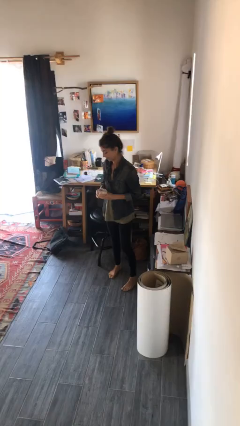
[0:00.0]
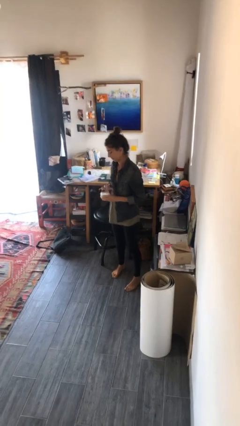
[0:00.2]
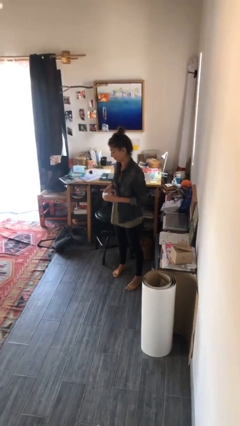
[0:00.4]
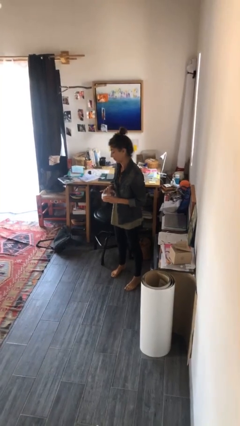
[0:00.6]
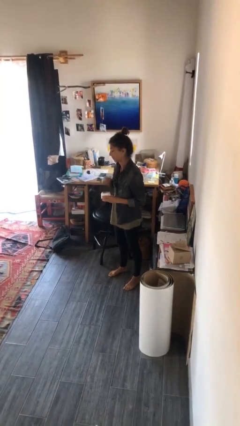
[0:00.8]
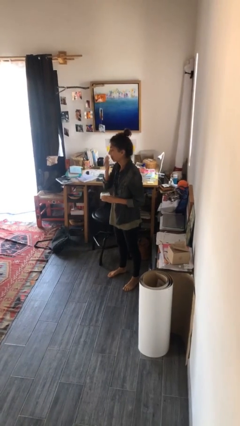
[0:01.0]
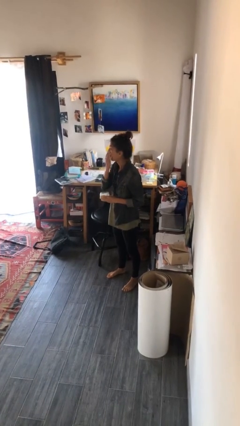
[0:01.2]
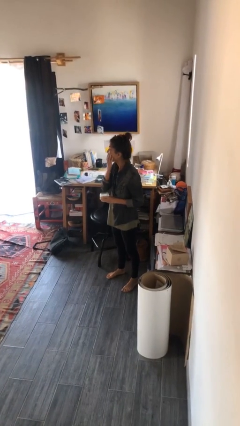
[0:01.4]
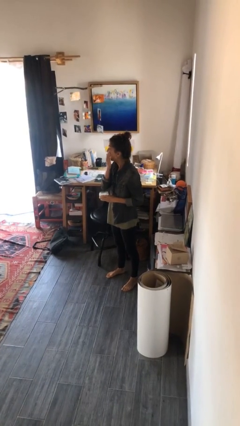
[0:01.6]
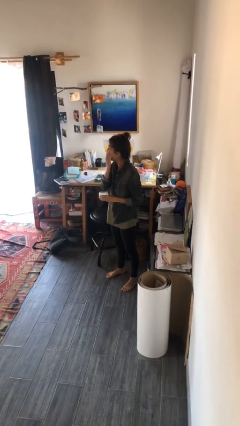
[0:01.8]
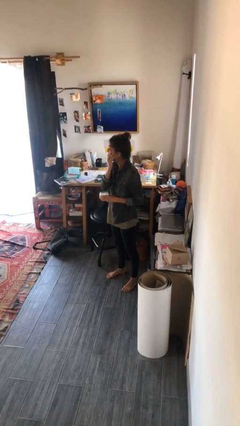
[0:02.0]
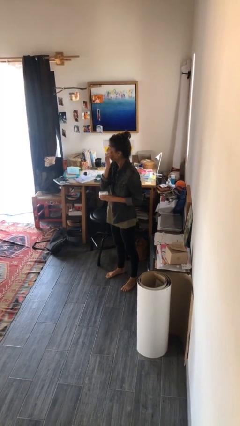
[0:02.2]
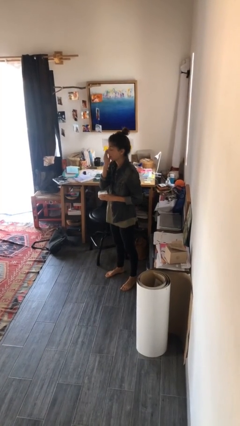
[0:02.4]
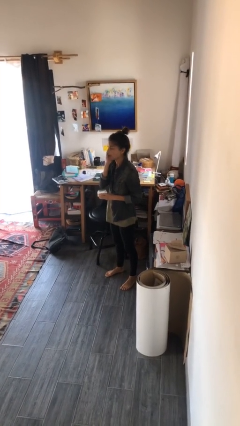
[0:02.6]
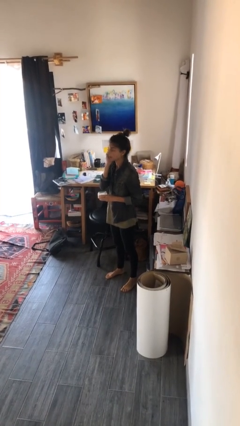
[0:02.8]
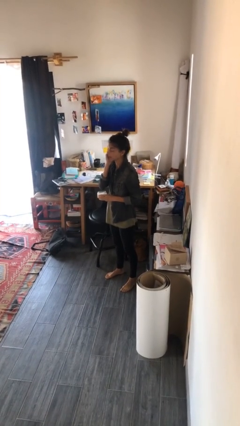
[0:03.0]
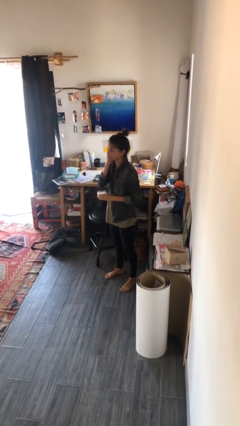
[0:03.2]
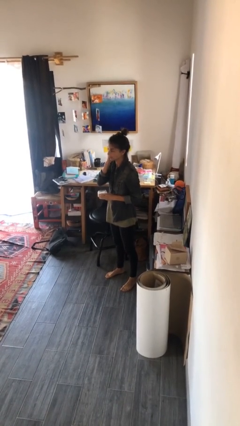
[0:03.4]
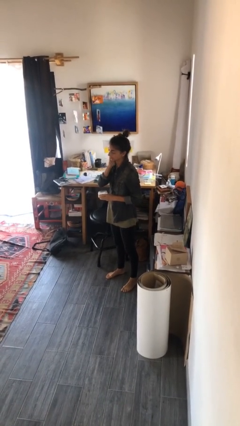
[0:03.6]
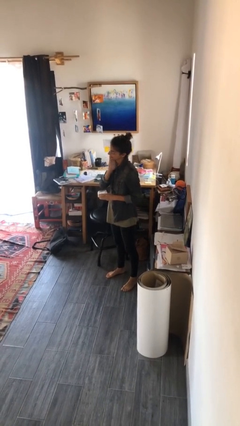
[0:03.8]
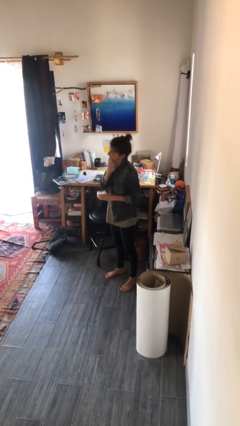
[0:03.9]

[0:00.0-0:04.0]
person applies facial moisturizer

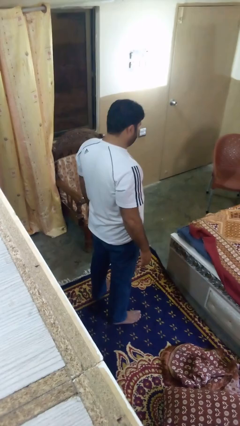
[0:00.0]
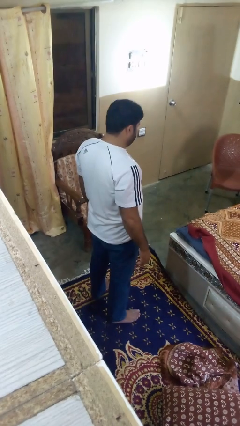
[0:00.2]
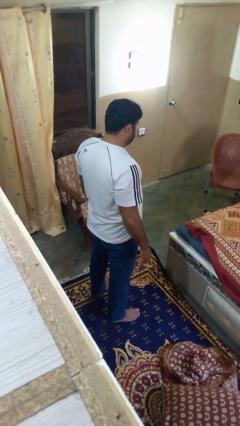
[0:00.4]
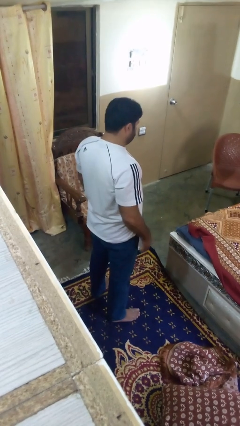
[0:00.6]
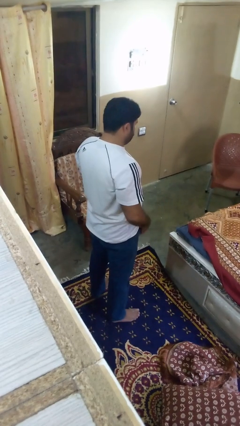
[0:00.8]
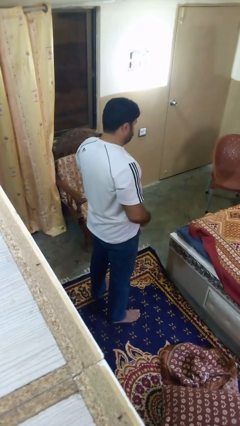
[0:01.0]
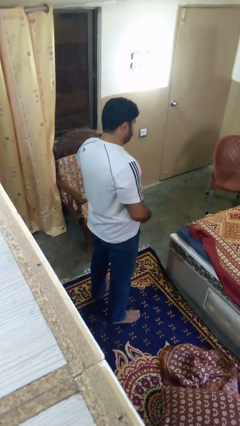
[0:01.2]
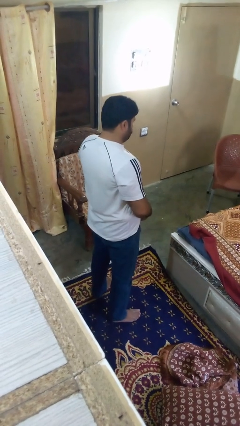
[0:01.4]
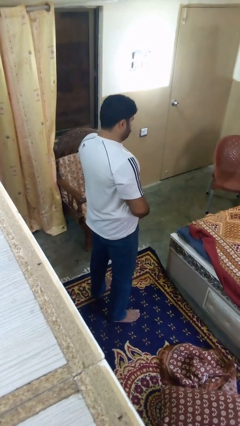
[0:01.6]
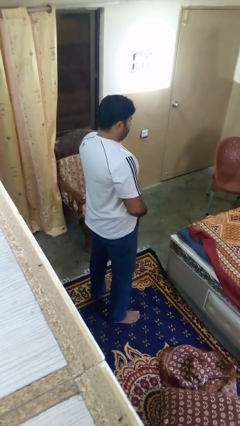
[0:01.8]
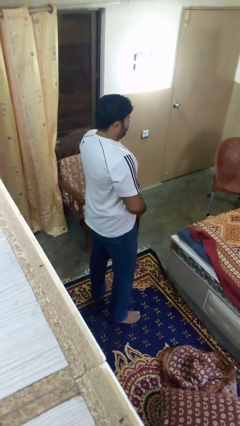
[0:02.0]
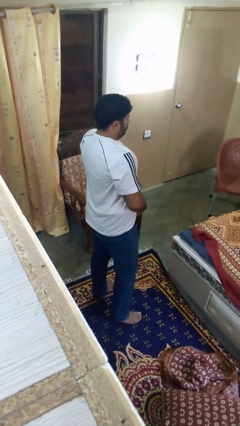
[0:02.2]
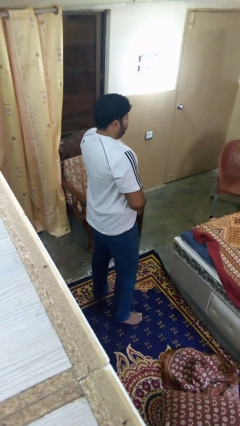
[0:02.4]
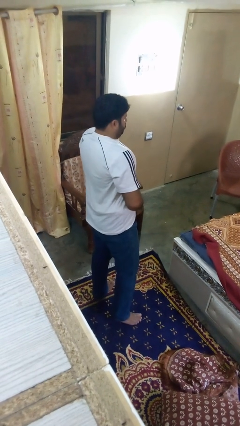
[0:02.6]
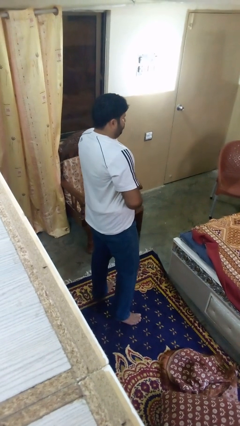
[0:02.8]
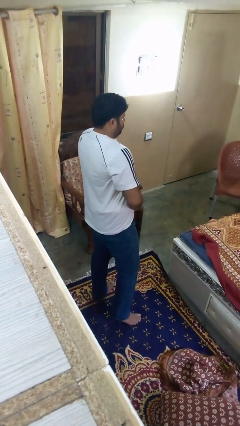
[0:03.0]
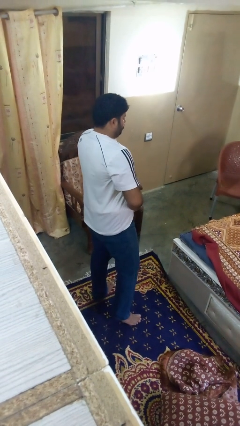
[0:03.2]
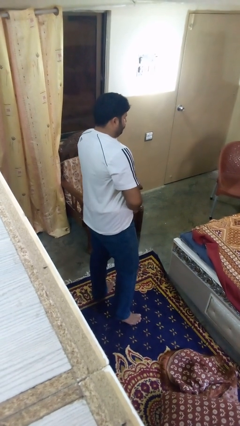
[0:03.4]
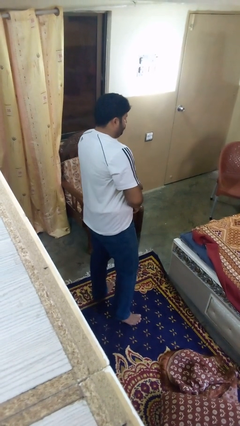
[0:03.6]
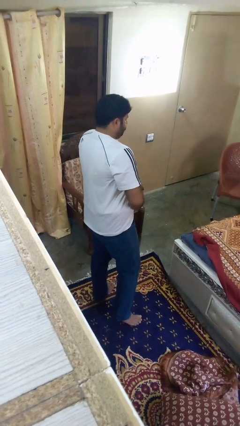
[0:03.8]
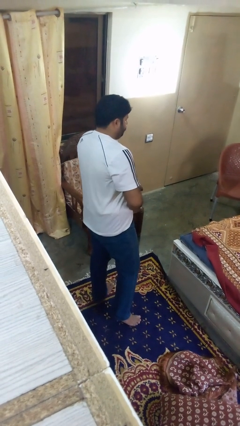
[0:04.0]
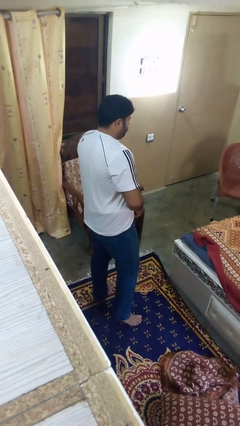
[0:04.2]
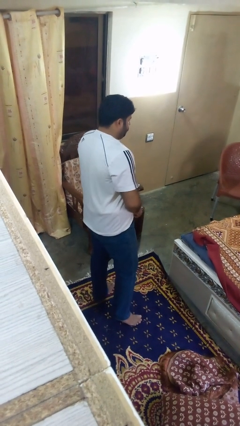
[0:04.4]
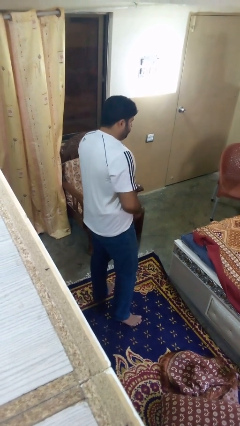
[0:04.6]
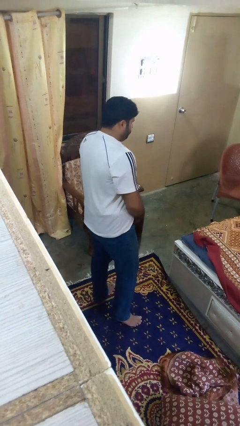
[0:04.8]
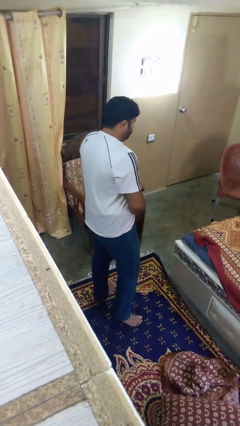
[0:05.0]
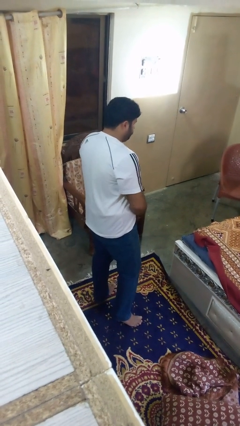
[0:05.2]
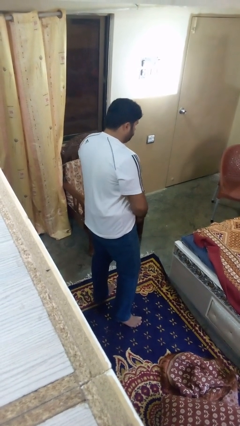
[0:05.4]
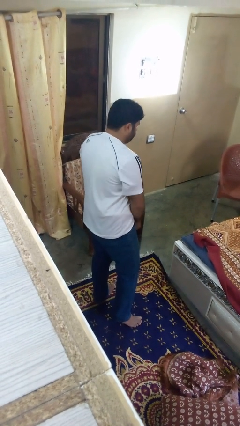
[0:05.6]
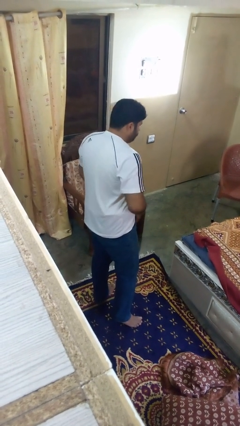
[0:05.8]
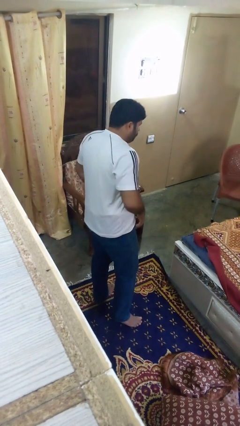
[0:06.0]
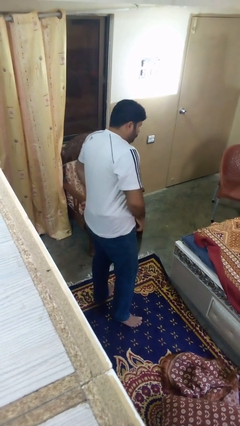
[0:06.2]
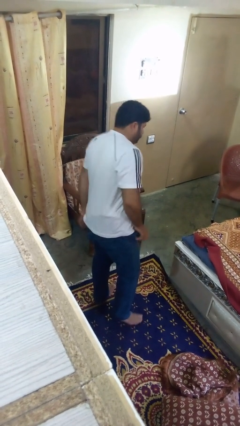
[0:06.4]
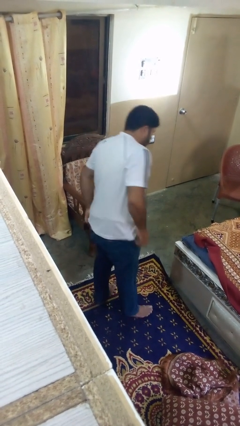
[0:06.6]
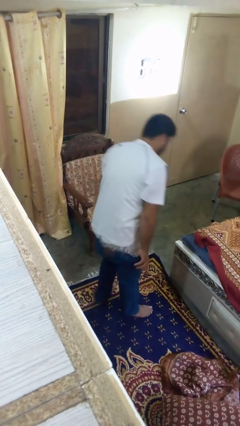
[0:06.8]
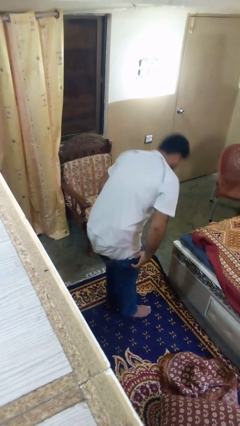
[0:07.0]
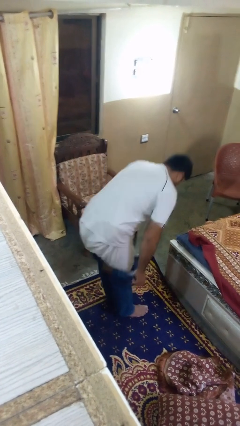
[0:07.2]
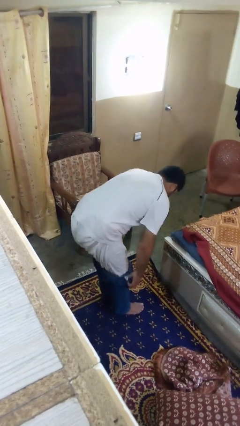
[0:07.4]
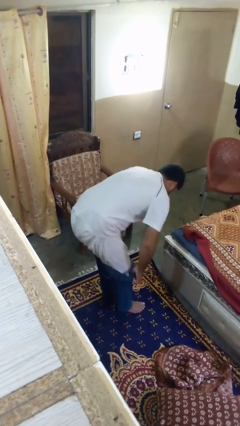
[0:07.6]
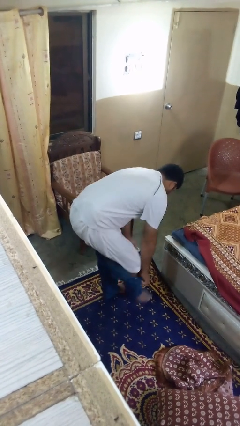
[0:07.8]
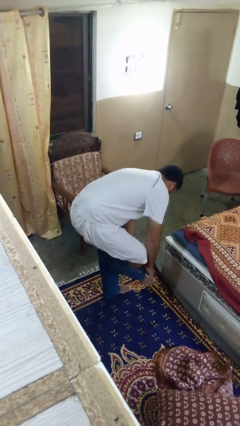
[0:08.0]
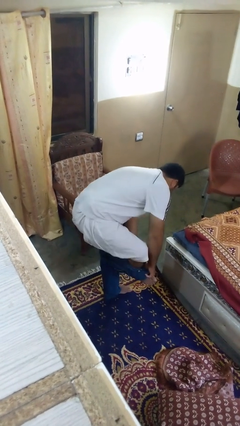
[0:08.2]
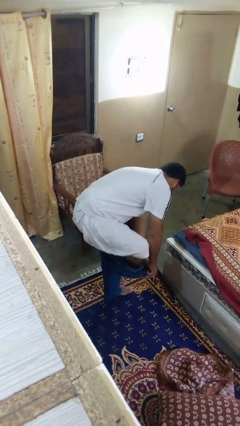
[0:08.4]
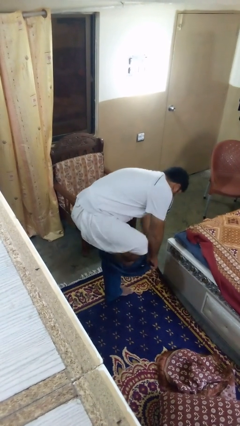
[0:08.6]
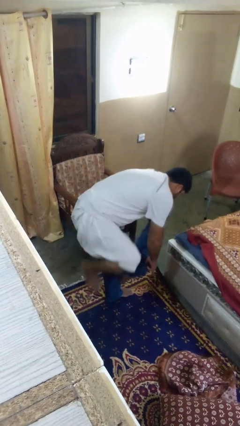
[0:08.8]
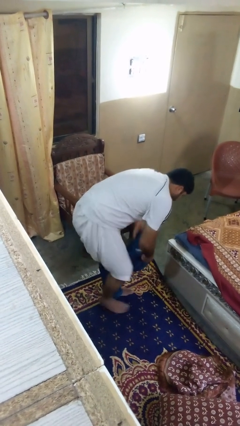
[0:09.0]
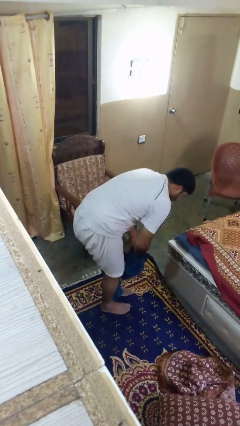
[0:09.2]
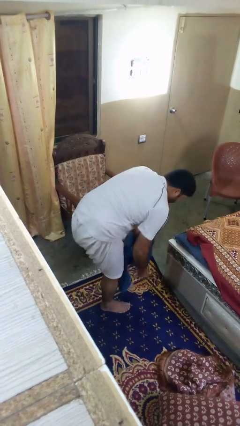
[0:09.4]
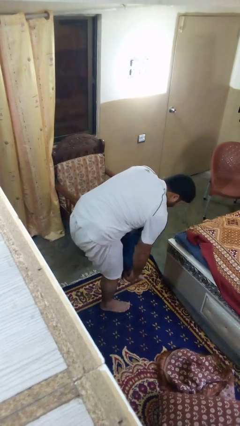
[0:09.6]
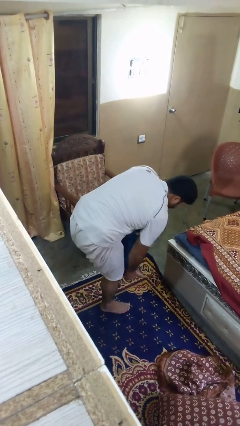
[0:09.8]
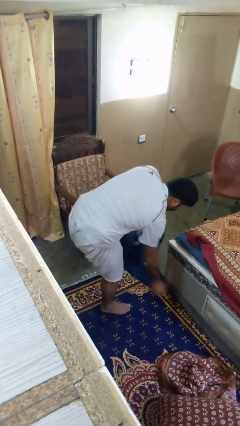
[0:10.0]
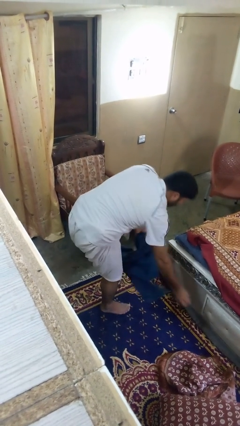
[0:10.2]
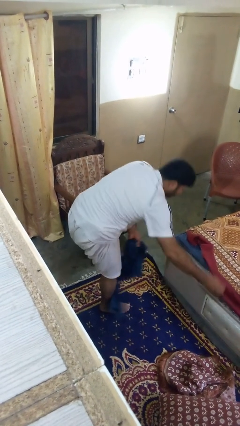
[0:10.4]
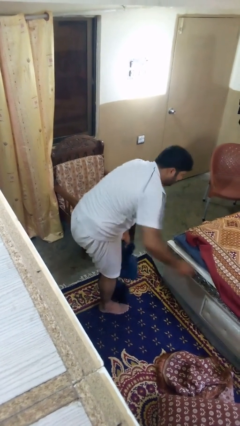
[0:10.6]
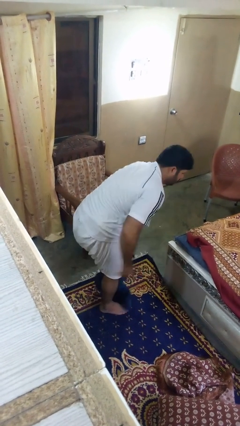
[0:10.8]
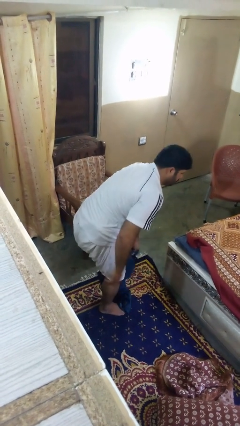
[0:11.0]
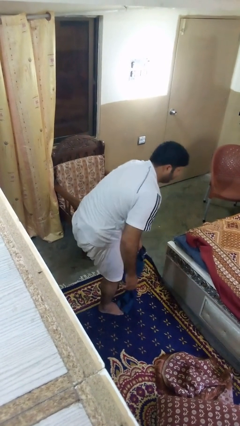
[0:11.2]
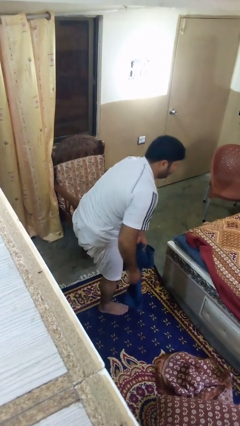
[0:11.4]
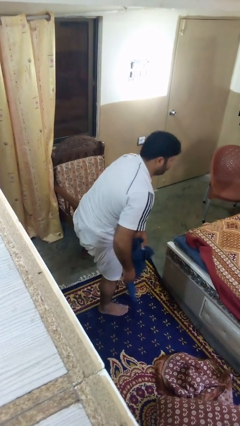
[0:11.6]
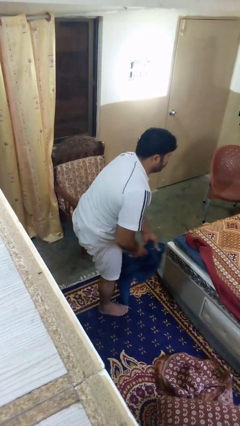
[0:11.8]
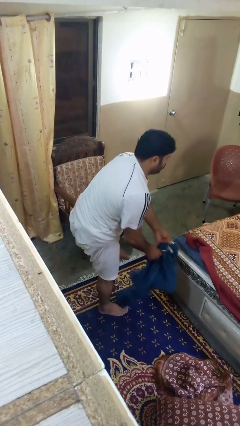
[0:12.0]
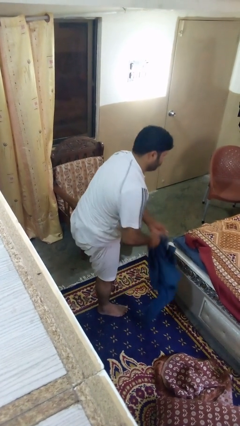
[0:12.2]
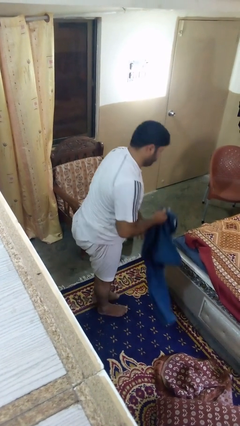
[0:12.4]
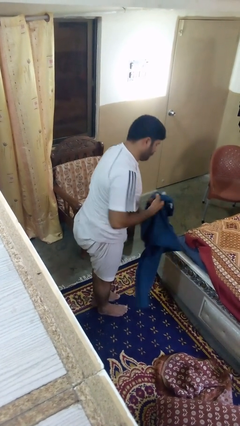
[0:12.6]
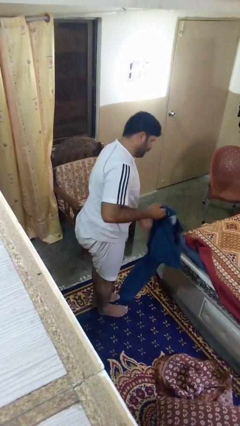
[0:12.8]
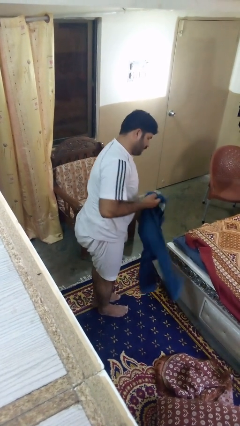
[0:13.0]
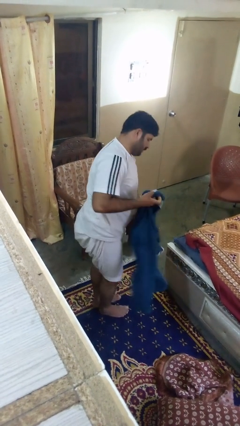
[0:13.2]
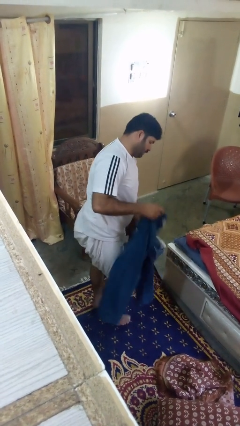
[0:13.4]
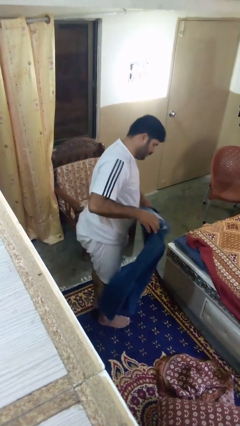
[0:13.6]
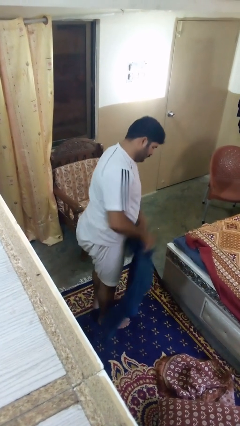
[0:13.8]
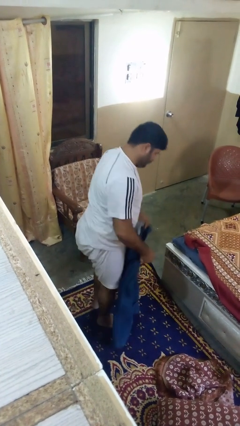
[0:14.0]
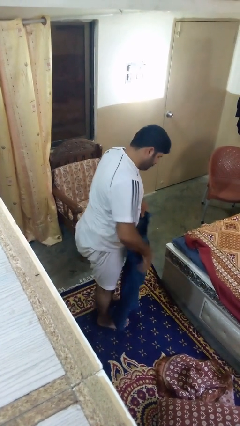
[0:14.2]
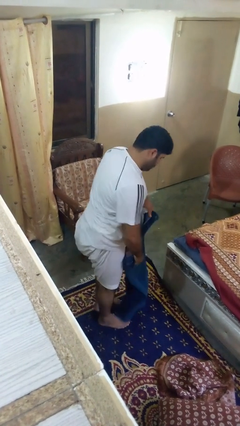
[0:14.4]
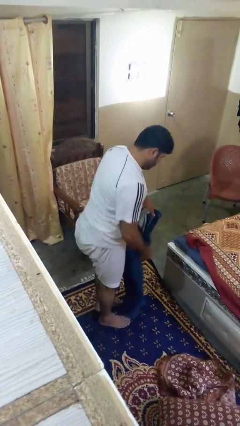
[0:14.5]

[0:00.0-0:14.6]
person takes off pants
